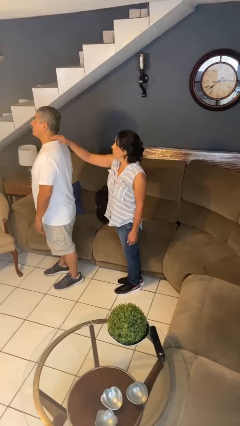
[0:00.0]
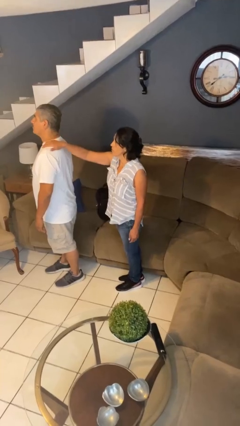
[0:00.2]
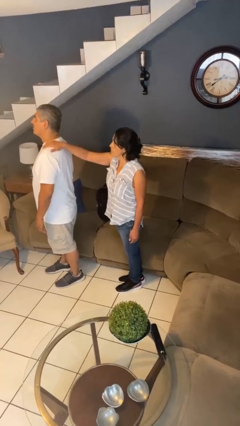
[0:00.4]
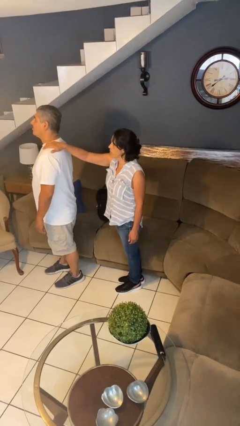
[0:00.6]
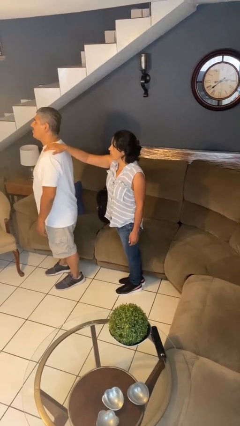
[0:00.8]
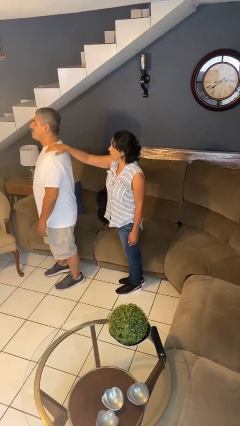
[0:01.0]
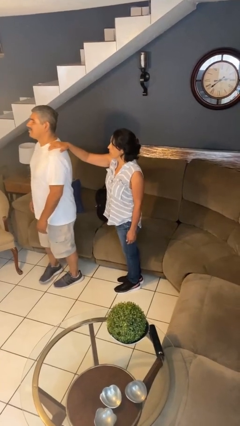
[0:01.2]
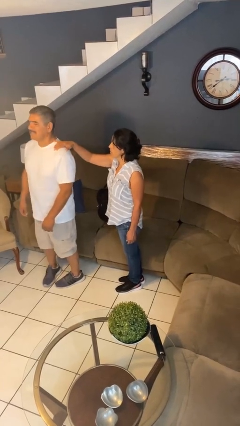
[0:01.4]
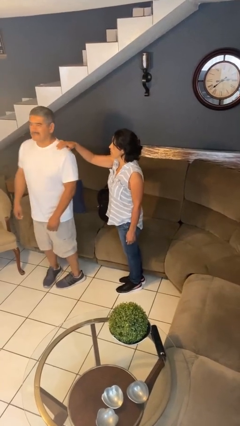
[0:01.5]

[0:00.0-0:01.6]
person grabs person by shoulder

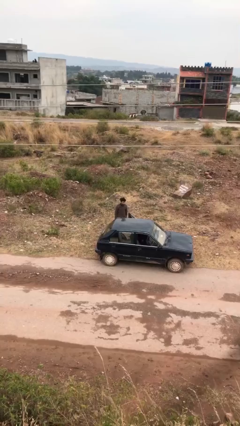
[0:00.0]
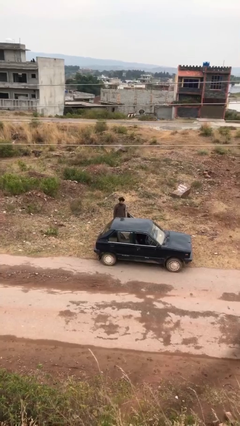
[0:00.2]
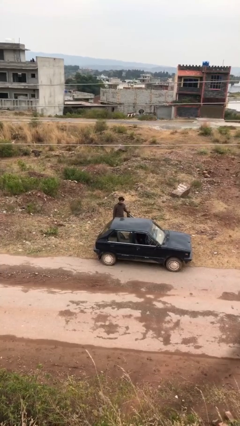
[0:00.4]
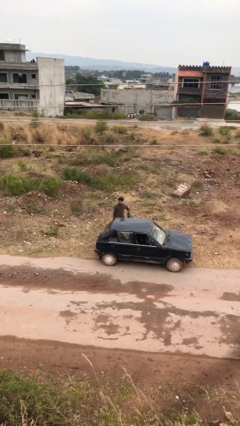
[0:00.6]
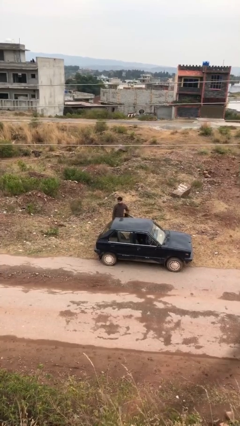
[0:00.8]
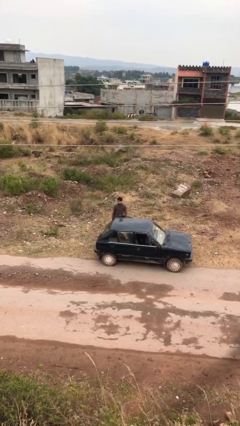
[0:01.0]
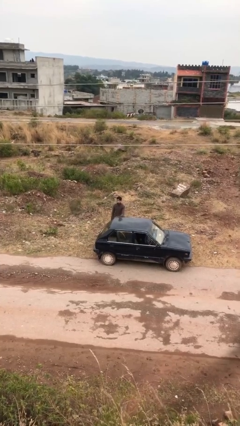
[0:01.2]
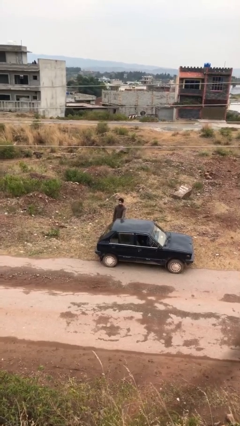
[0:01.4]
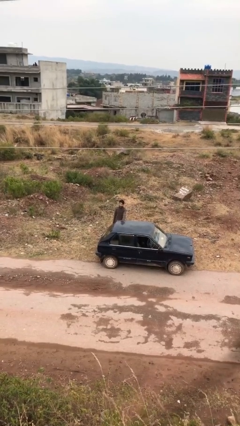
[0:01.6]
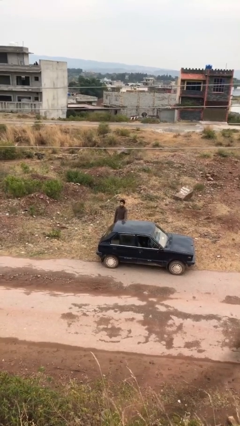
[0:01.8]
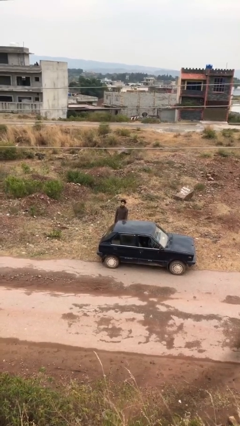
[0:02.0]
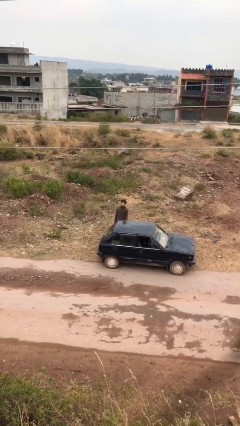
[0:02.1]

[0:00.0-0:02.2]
person closes car door

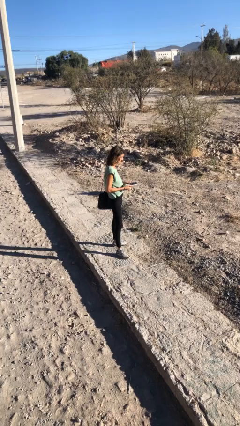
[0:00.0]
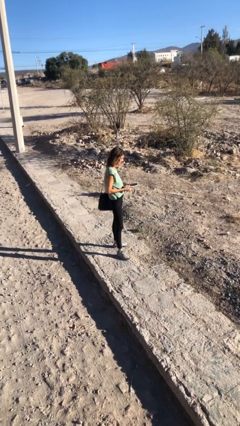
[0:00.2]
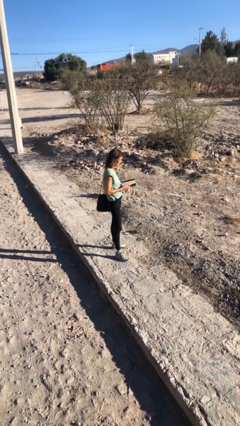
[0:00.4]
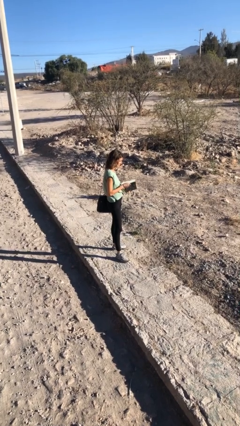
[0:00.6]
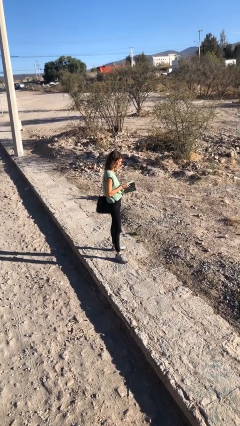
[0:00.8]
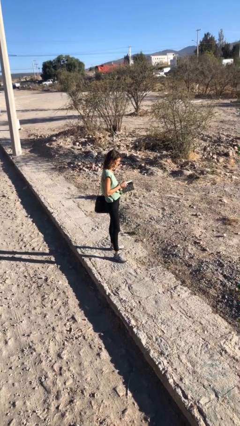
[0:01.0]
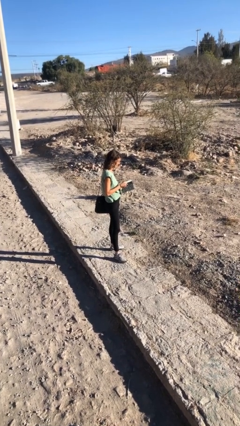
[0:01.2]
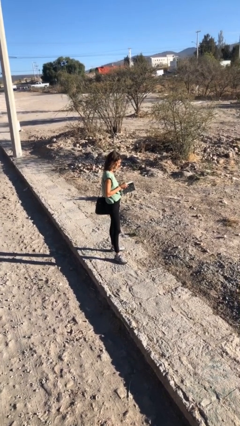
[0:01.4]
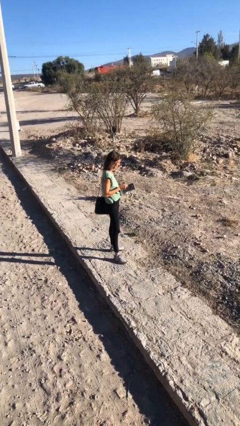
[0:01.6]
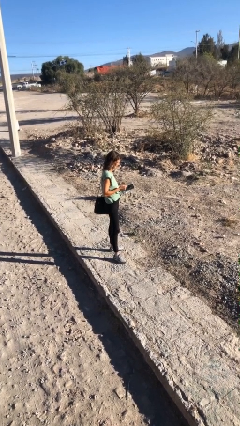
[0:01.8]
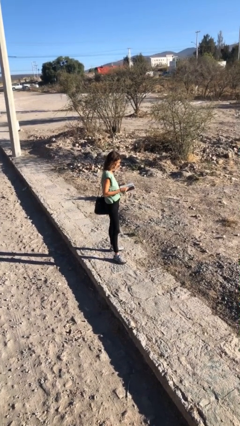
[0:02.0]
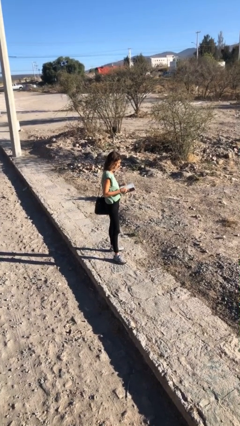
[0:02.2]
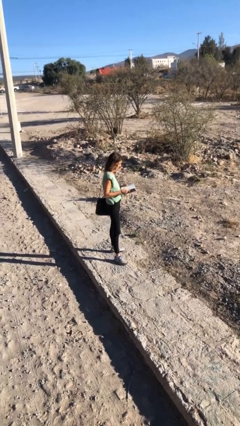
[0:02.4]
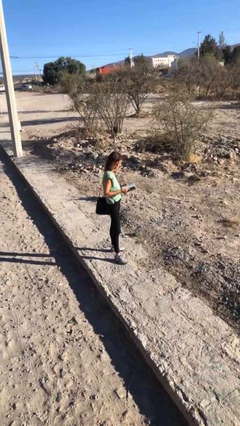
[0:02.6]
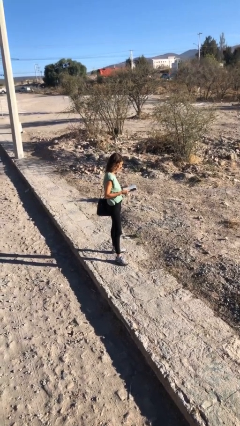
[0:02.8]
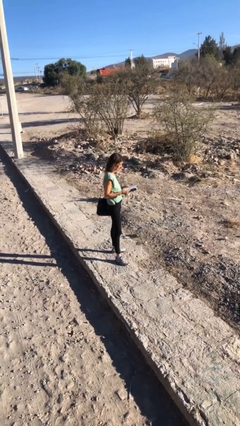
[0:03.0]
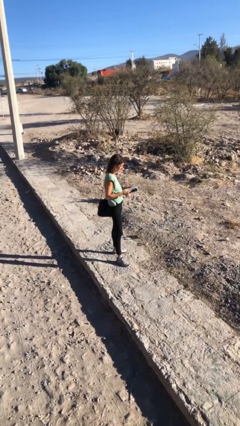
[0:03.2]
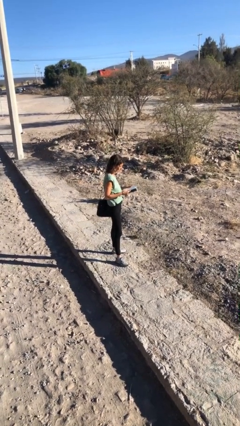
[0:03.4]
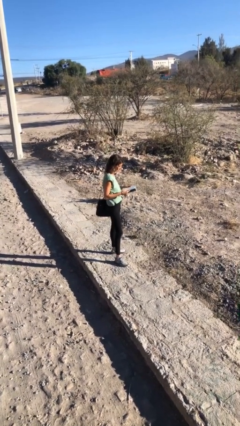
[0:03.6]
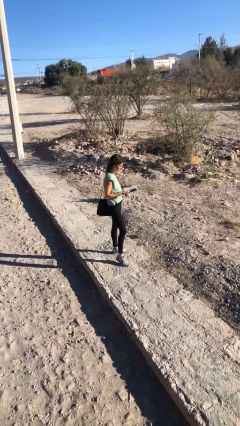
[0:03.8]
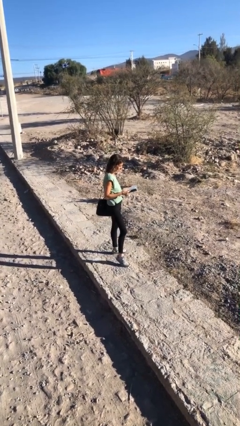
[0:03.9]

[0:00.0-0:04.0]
person reads document

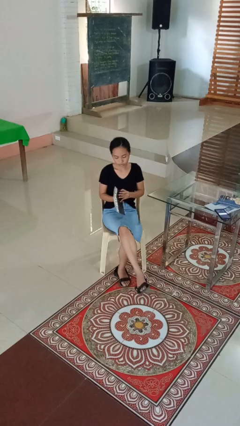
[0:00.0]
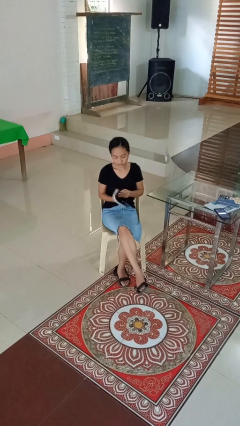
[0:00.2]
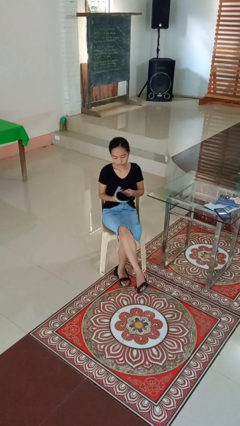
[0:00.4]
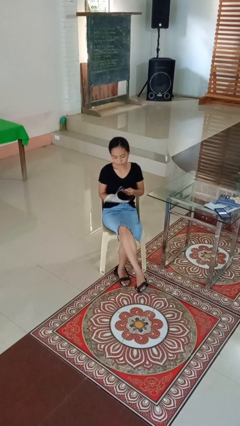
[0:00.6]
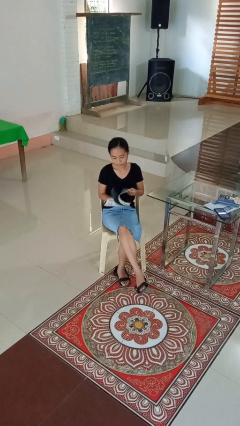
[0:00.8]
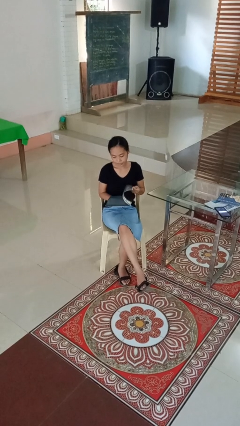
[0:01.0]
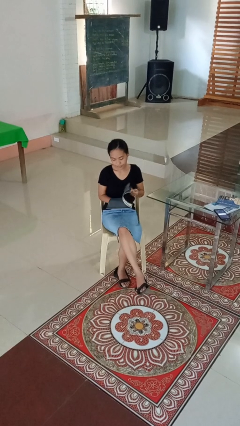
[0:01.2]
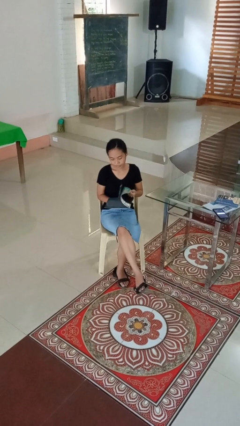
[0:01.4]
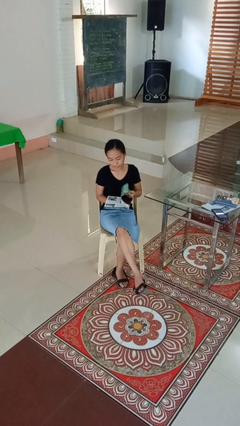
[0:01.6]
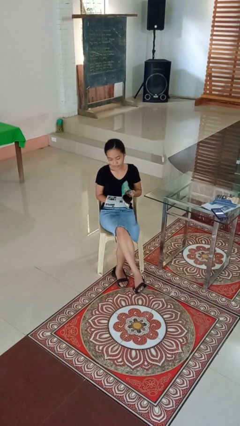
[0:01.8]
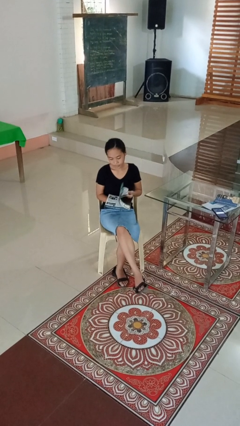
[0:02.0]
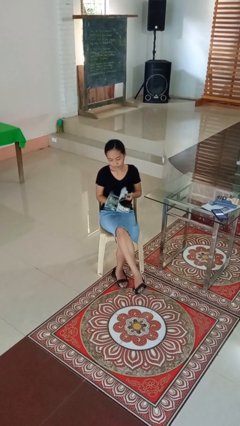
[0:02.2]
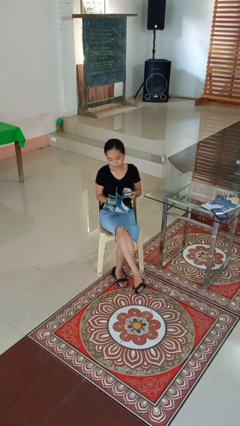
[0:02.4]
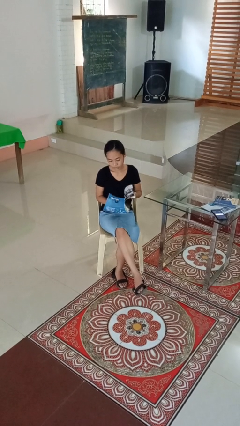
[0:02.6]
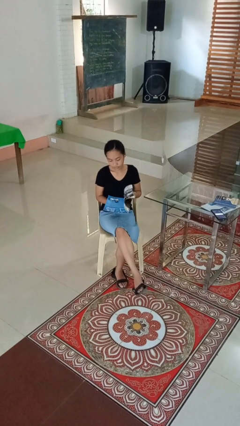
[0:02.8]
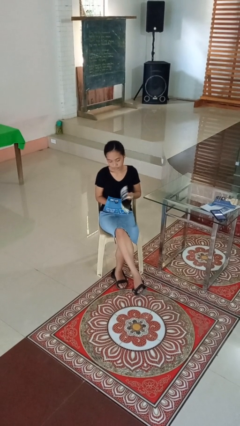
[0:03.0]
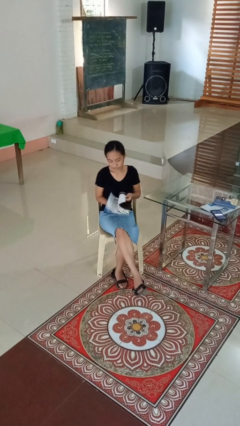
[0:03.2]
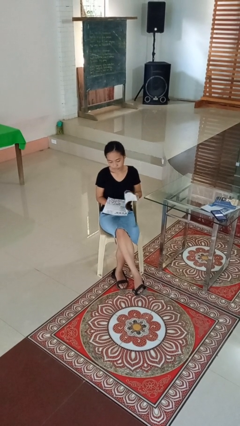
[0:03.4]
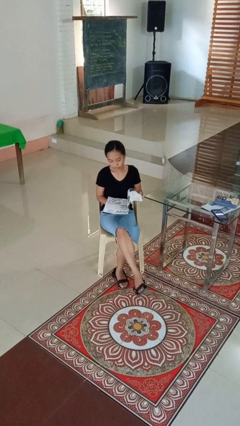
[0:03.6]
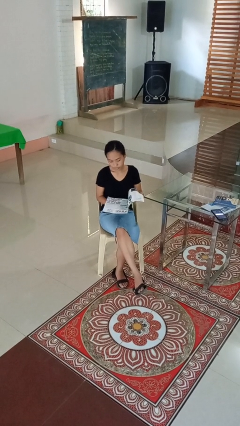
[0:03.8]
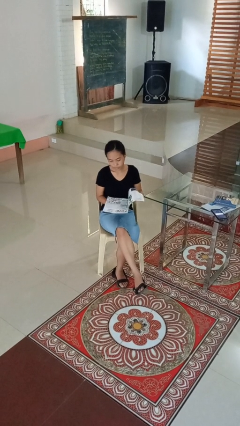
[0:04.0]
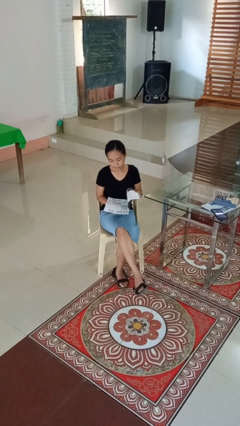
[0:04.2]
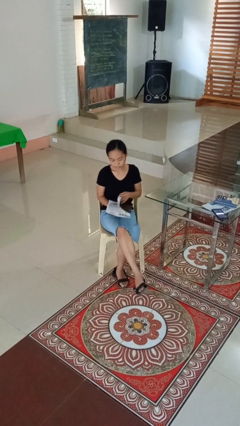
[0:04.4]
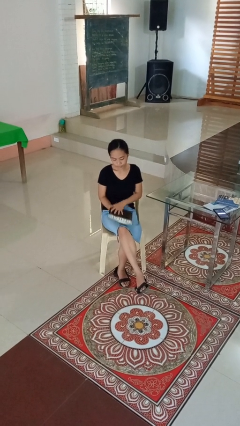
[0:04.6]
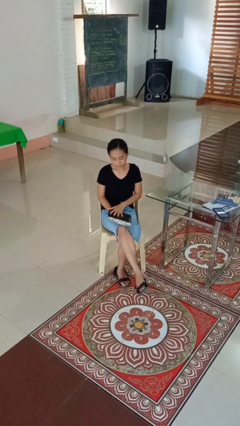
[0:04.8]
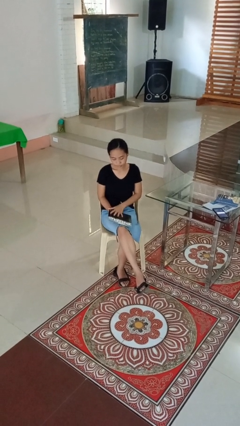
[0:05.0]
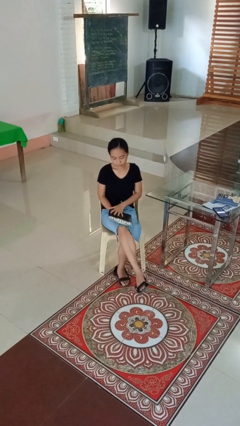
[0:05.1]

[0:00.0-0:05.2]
person reads magazine

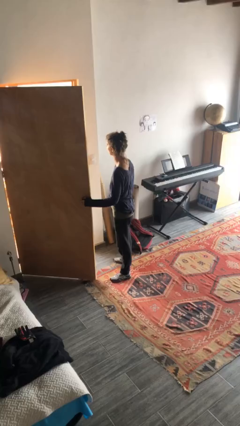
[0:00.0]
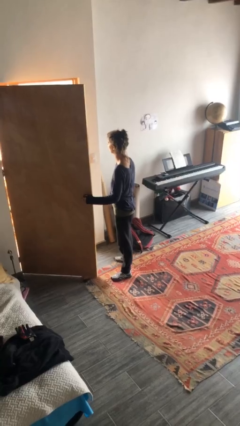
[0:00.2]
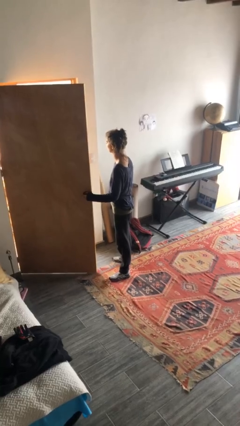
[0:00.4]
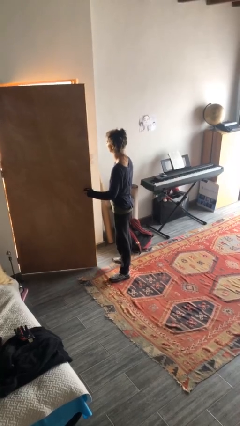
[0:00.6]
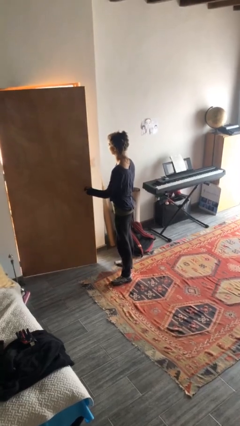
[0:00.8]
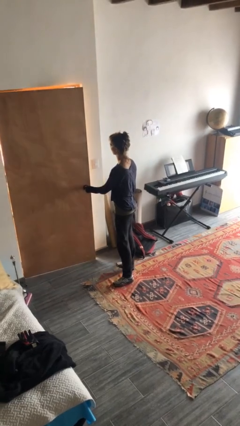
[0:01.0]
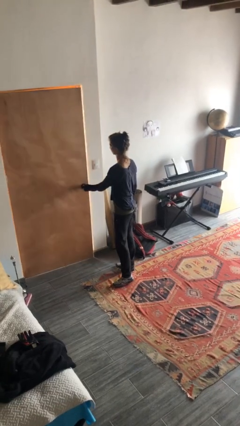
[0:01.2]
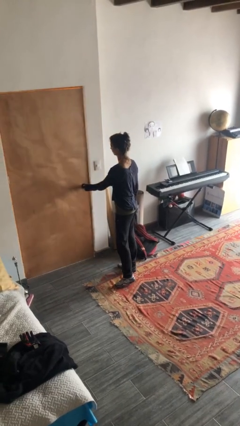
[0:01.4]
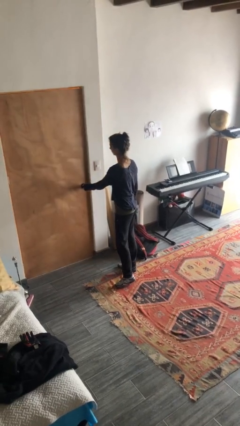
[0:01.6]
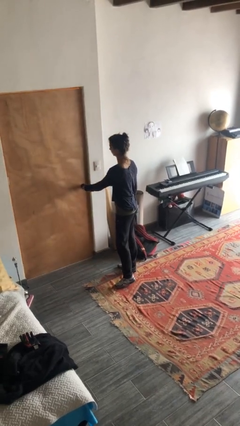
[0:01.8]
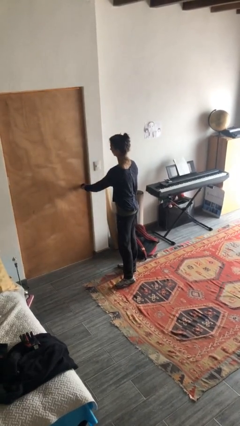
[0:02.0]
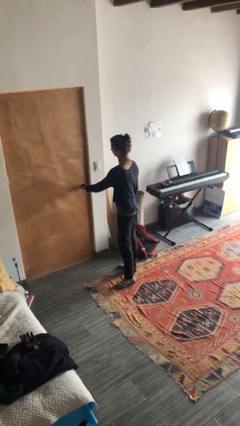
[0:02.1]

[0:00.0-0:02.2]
person closes facility door

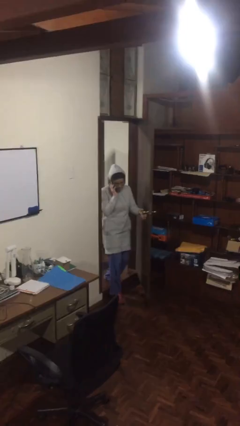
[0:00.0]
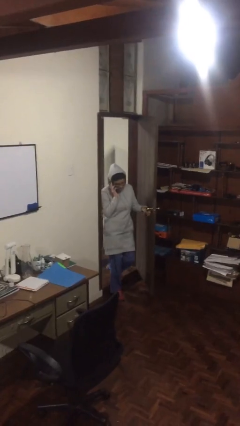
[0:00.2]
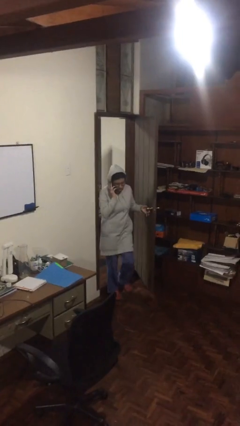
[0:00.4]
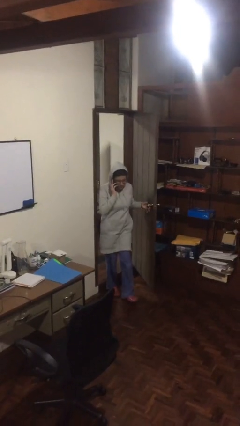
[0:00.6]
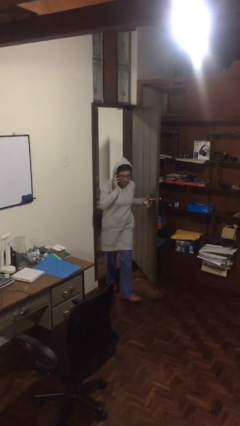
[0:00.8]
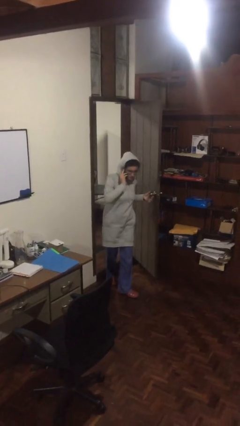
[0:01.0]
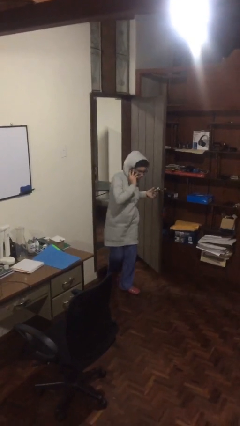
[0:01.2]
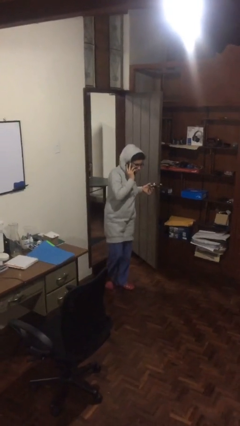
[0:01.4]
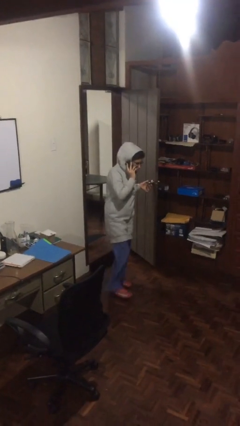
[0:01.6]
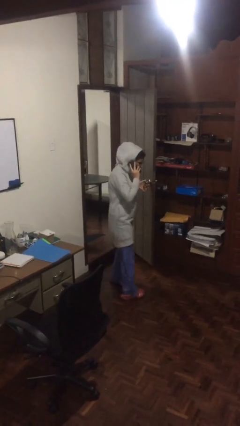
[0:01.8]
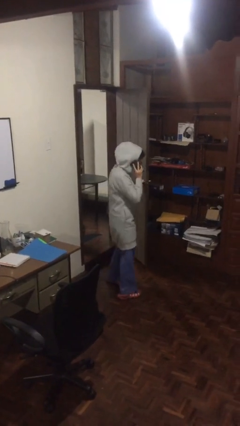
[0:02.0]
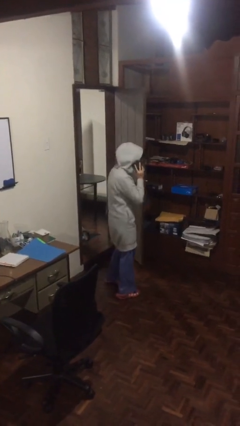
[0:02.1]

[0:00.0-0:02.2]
person enters scene through structure

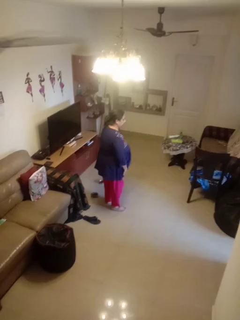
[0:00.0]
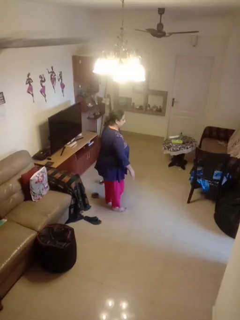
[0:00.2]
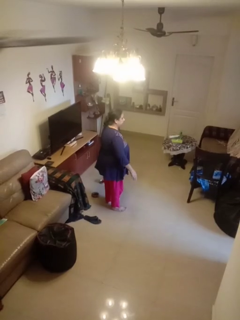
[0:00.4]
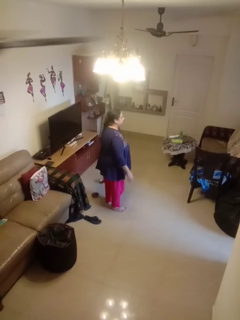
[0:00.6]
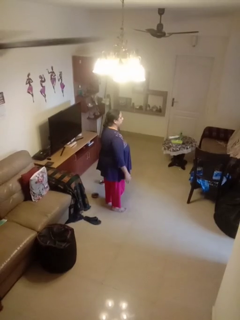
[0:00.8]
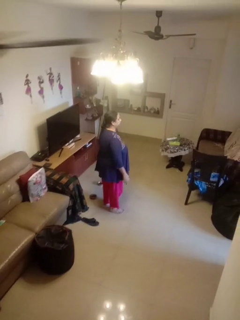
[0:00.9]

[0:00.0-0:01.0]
person slaps hands on thighs
